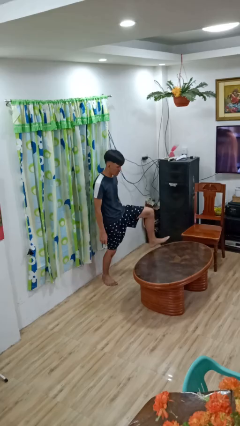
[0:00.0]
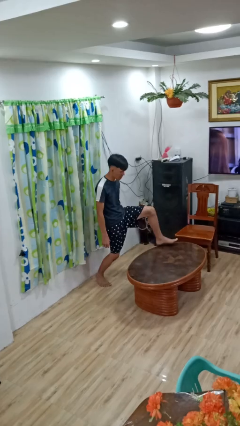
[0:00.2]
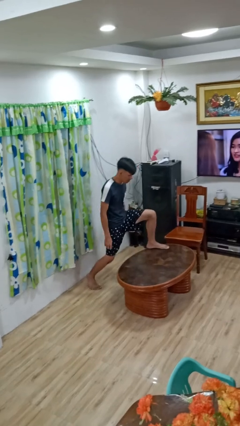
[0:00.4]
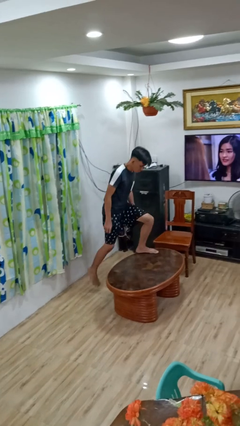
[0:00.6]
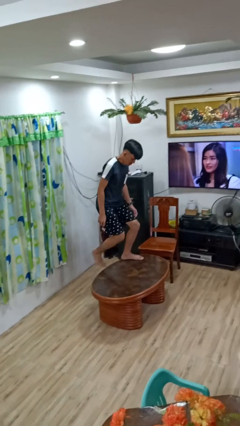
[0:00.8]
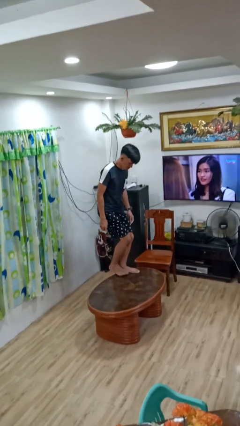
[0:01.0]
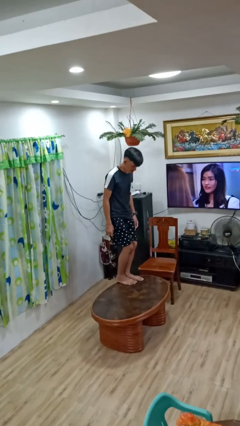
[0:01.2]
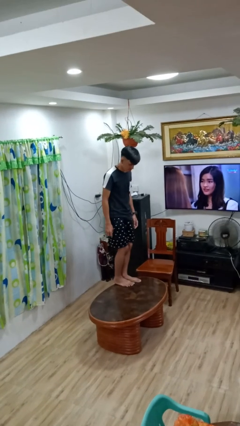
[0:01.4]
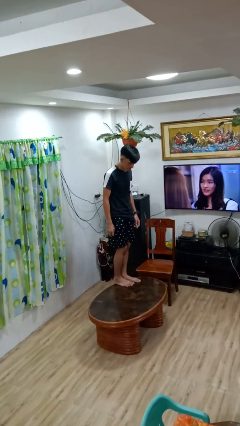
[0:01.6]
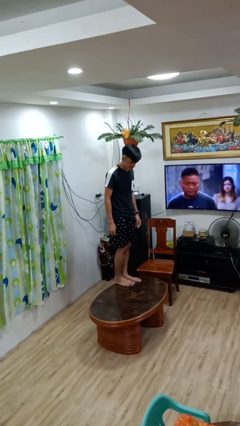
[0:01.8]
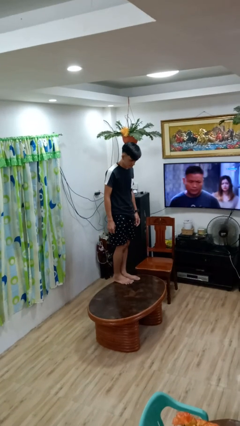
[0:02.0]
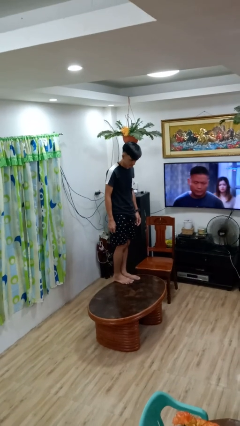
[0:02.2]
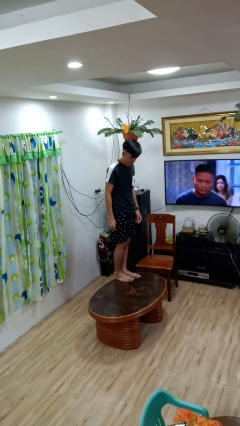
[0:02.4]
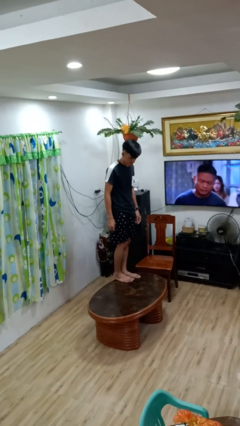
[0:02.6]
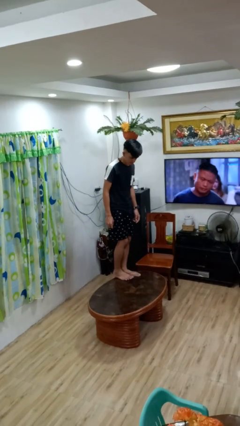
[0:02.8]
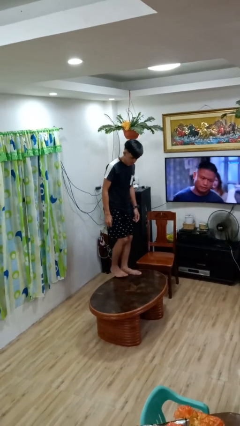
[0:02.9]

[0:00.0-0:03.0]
person climbs on table

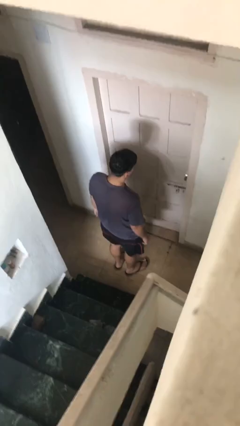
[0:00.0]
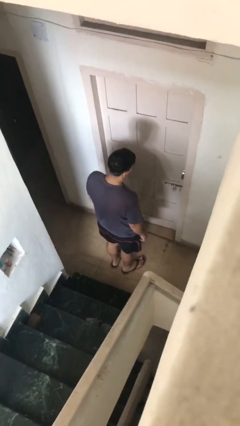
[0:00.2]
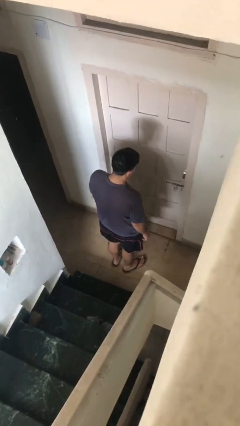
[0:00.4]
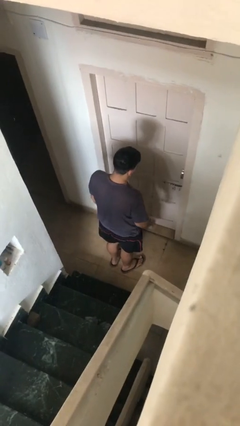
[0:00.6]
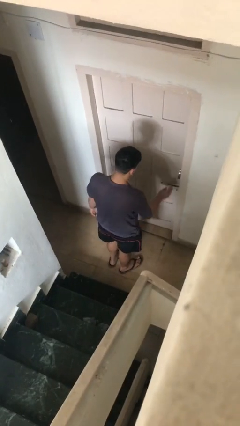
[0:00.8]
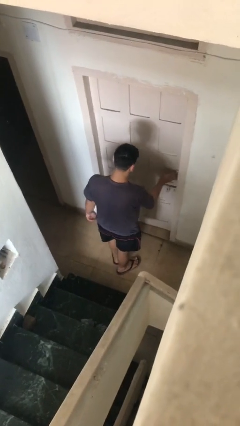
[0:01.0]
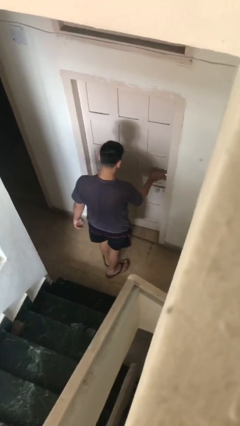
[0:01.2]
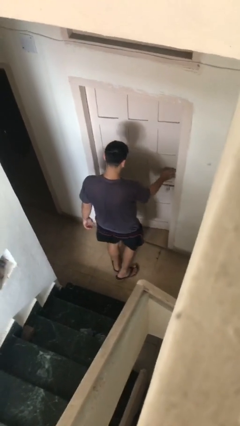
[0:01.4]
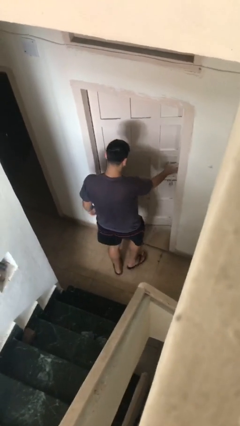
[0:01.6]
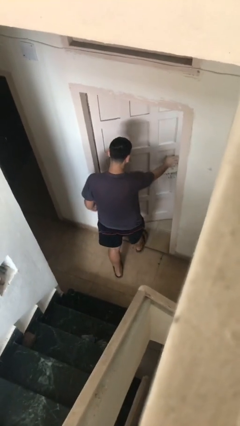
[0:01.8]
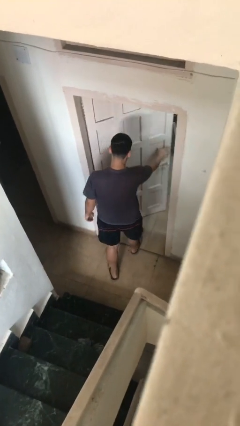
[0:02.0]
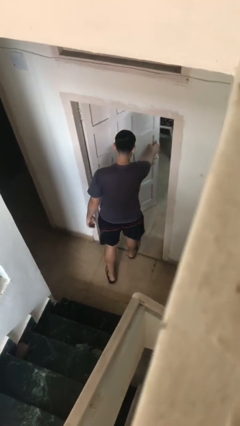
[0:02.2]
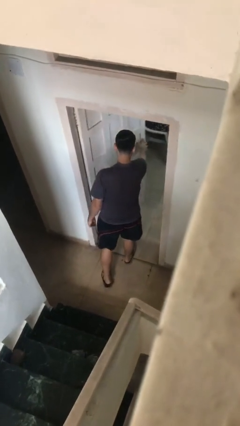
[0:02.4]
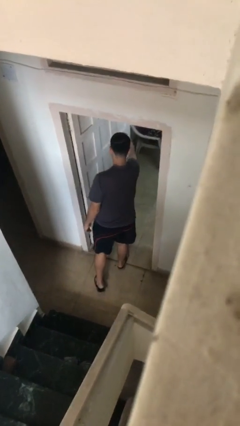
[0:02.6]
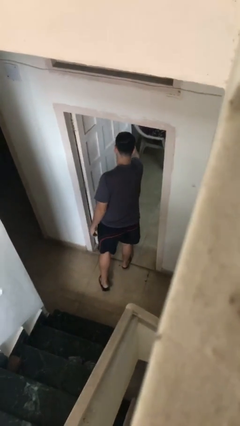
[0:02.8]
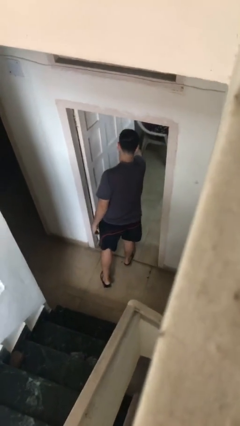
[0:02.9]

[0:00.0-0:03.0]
person opens facility door

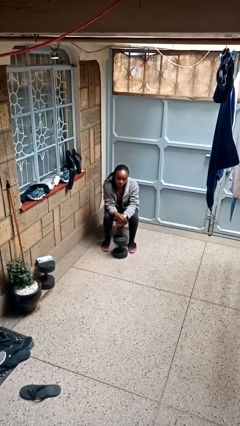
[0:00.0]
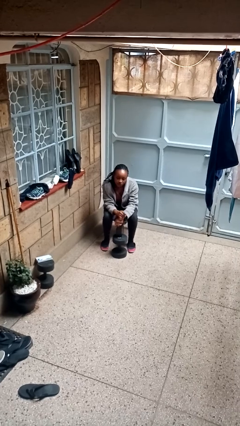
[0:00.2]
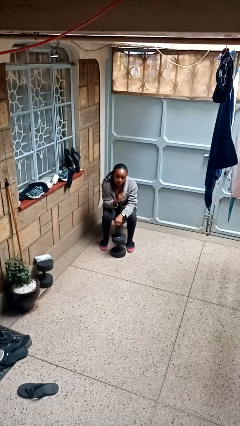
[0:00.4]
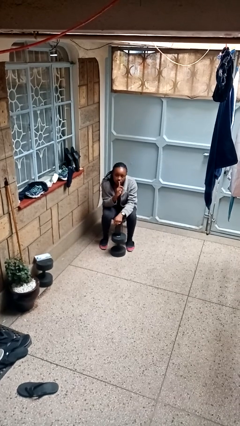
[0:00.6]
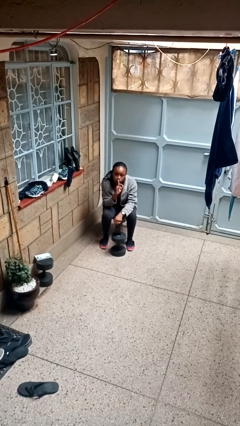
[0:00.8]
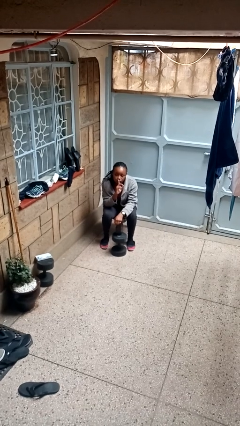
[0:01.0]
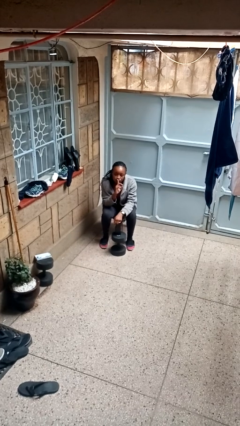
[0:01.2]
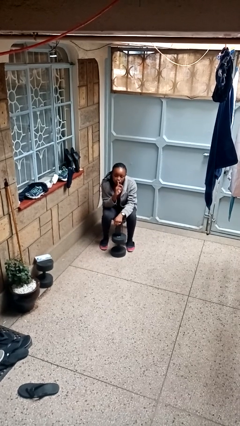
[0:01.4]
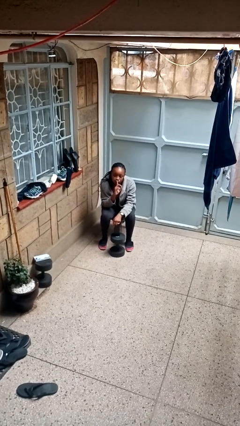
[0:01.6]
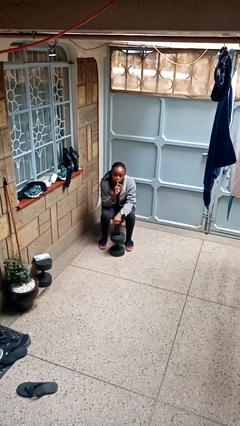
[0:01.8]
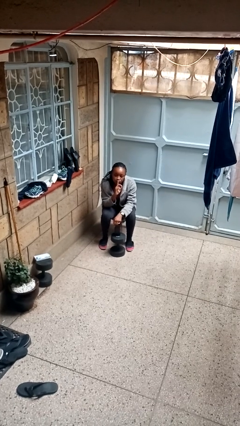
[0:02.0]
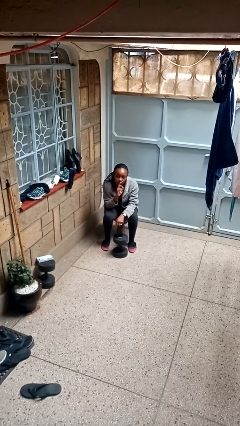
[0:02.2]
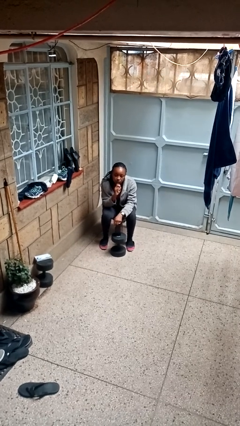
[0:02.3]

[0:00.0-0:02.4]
person gestures be quiet

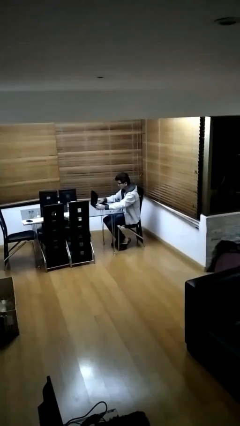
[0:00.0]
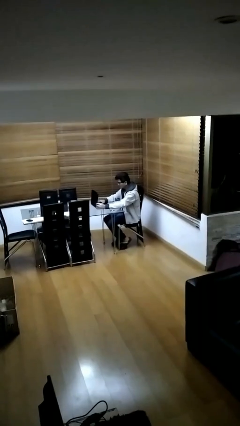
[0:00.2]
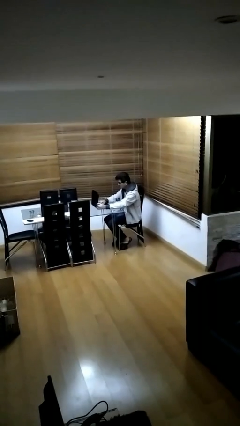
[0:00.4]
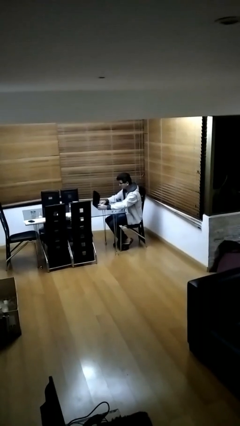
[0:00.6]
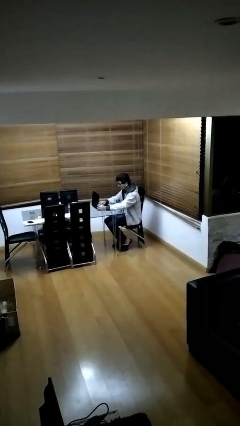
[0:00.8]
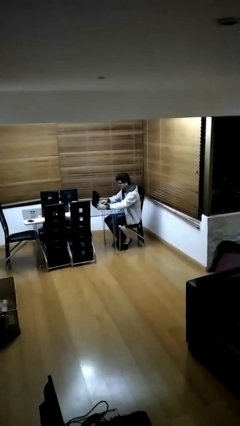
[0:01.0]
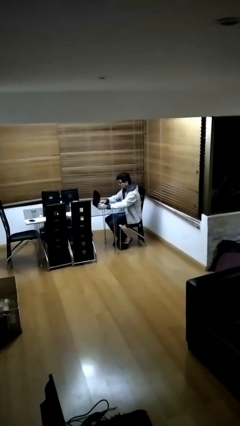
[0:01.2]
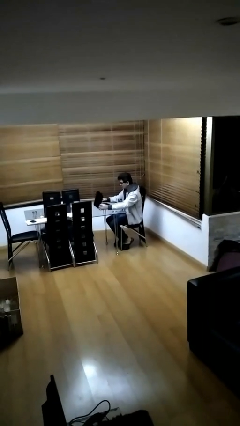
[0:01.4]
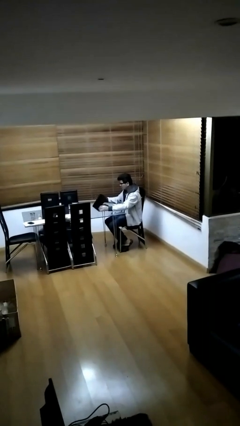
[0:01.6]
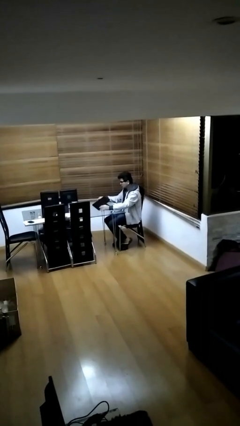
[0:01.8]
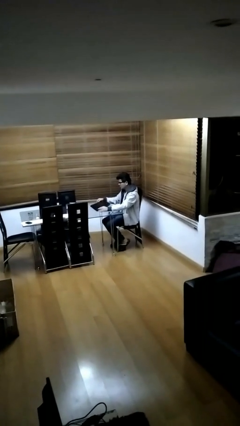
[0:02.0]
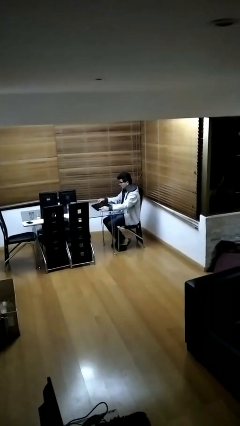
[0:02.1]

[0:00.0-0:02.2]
person interacts with laptop

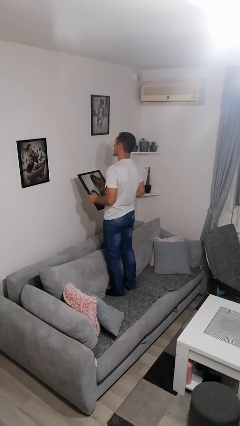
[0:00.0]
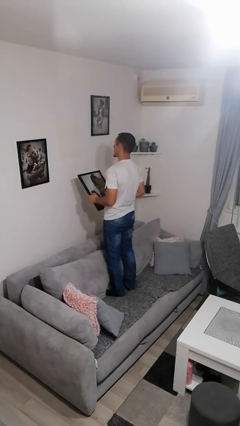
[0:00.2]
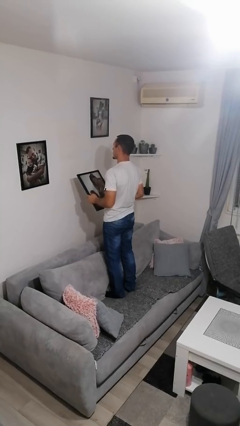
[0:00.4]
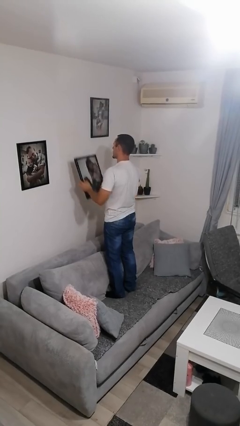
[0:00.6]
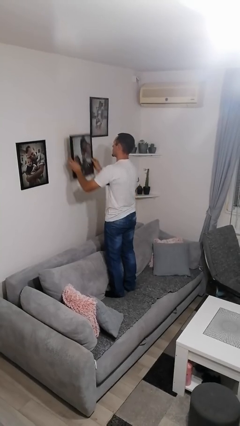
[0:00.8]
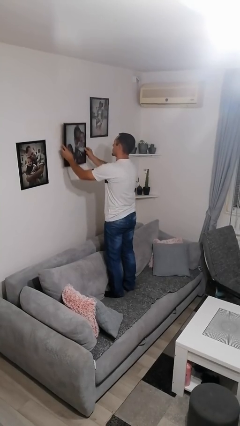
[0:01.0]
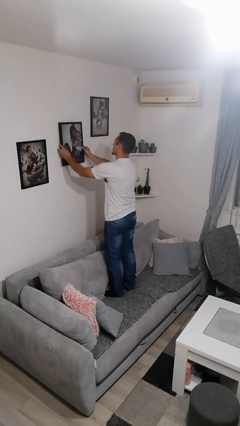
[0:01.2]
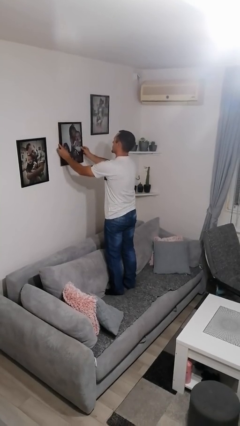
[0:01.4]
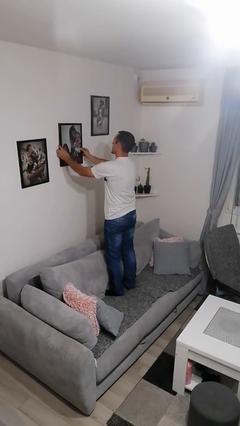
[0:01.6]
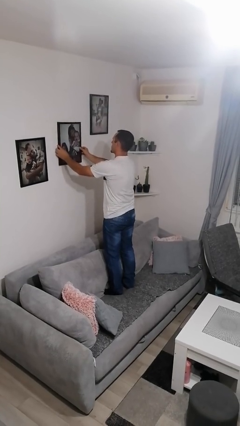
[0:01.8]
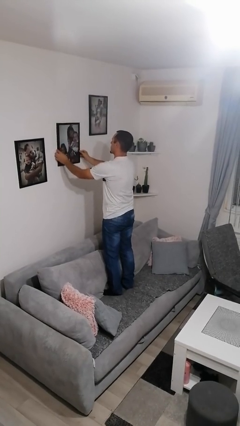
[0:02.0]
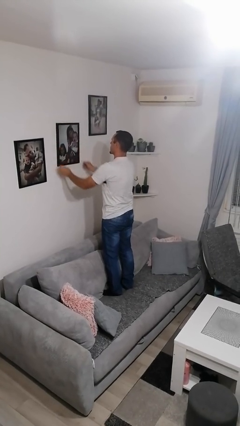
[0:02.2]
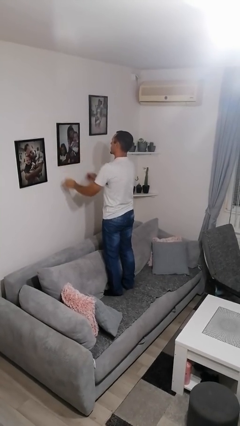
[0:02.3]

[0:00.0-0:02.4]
person puts up picture frame

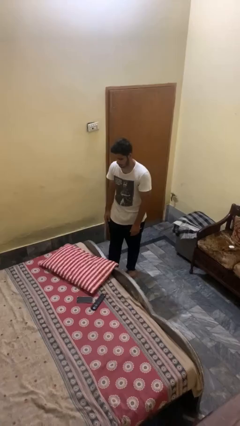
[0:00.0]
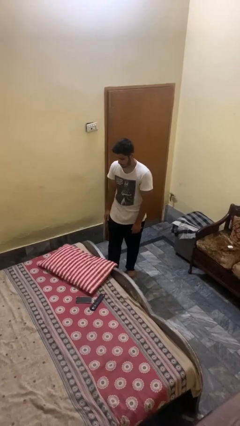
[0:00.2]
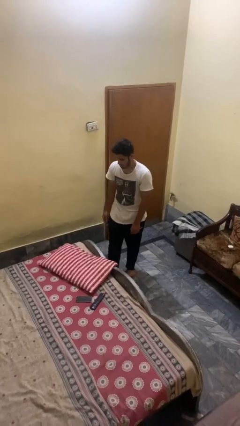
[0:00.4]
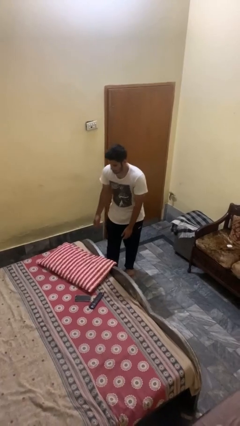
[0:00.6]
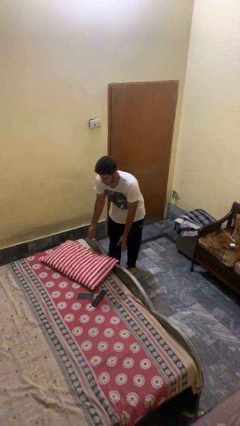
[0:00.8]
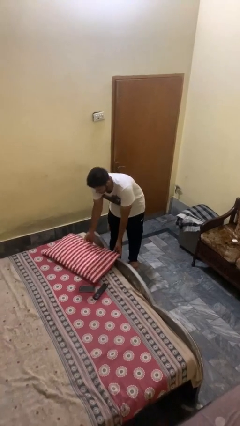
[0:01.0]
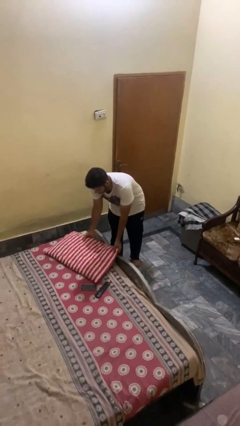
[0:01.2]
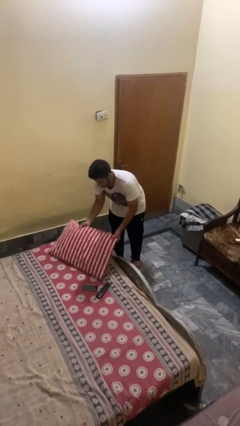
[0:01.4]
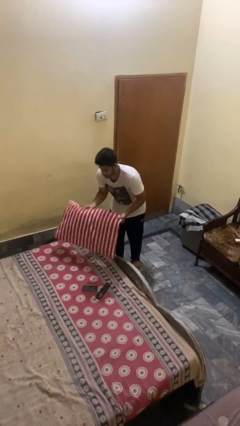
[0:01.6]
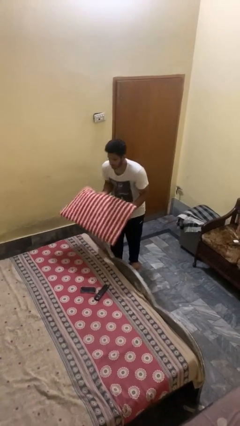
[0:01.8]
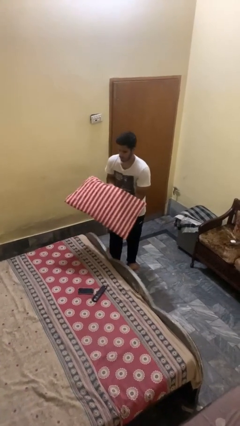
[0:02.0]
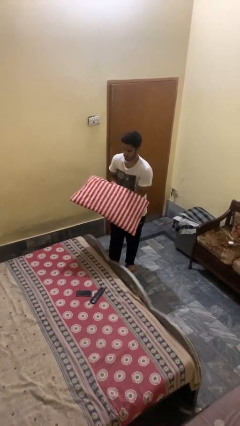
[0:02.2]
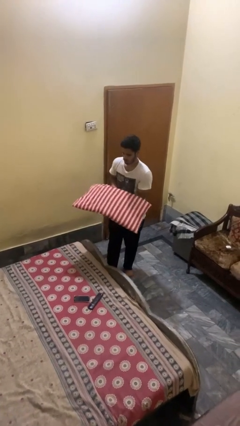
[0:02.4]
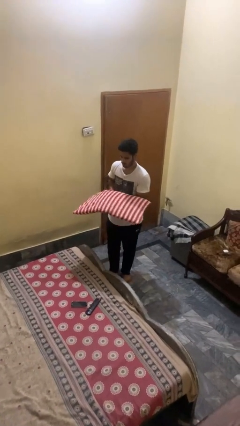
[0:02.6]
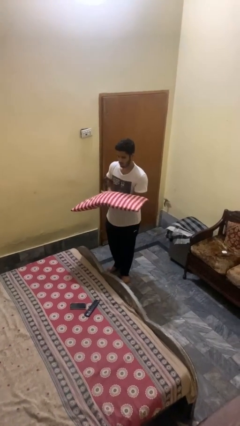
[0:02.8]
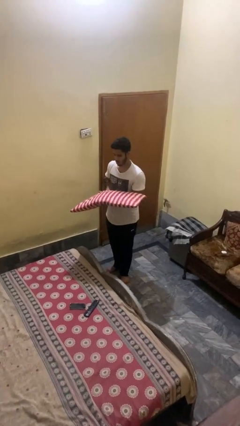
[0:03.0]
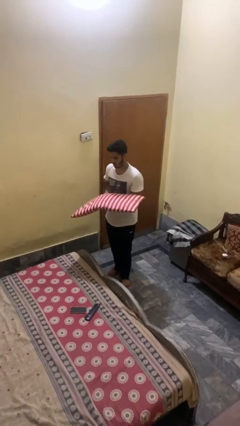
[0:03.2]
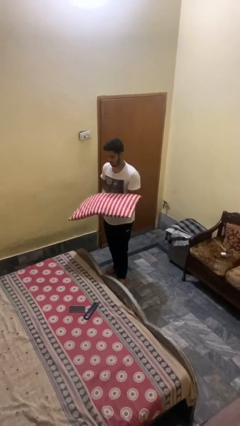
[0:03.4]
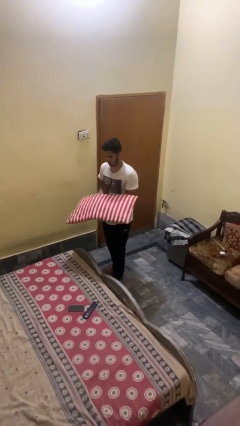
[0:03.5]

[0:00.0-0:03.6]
person picks up object from bed

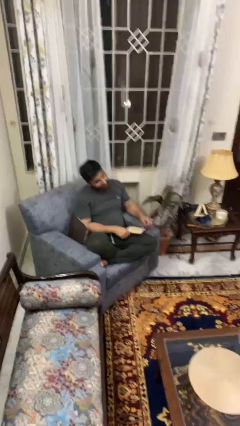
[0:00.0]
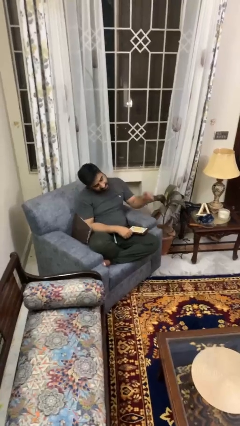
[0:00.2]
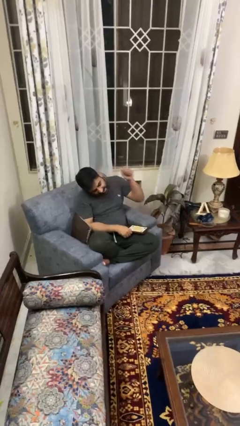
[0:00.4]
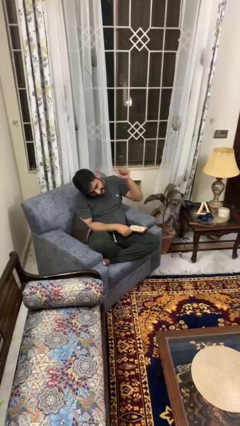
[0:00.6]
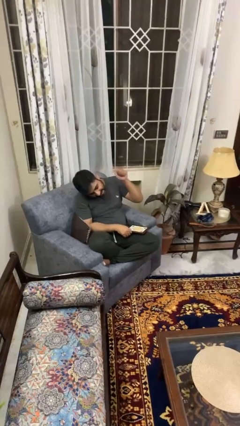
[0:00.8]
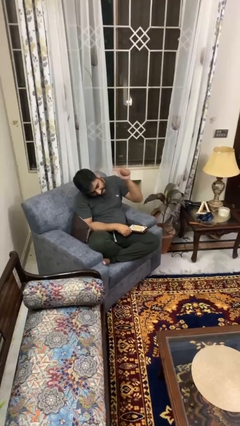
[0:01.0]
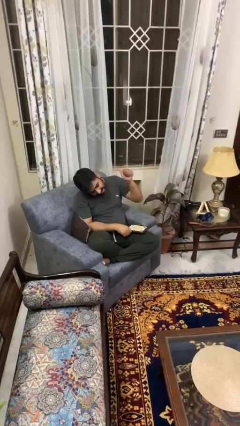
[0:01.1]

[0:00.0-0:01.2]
person gestures behind me
